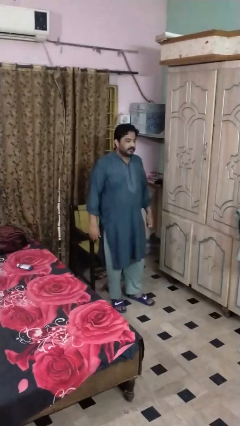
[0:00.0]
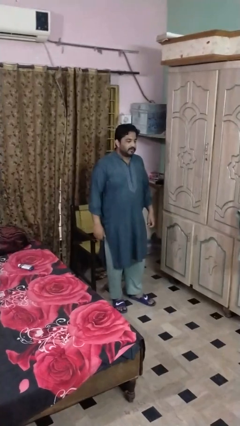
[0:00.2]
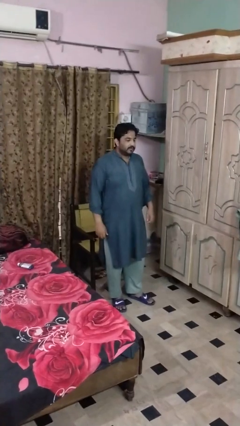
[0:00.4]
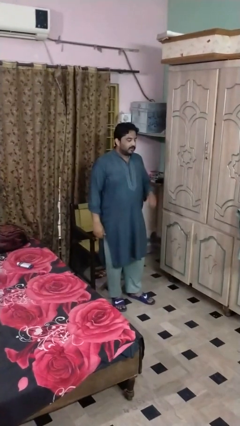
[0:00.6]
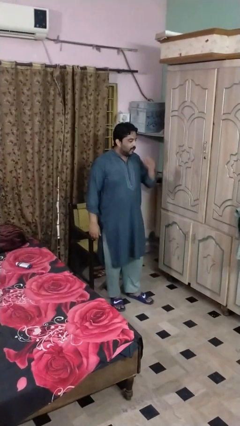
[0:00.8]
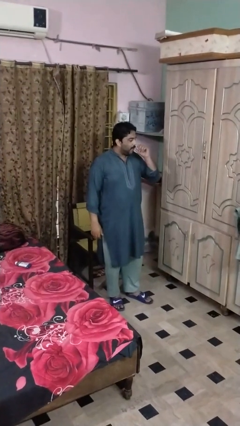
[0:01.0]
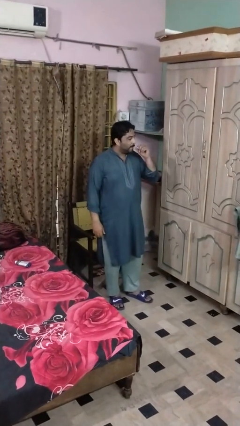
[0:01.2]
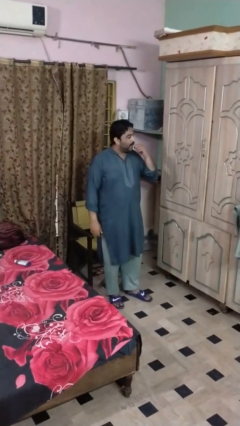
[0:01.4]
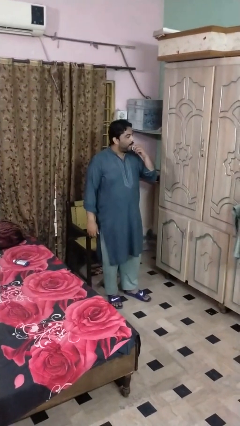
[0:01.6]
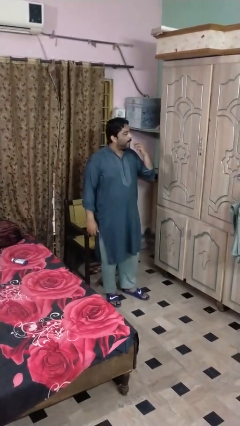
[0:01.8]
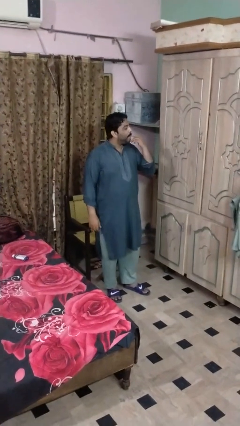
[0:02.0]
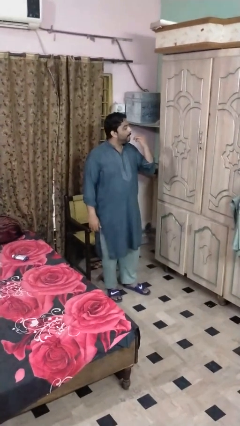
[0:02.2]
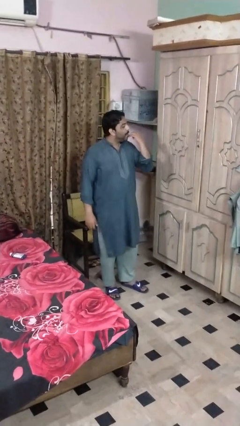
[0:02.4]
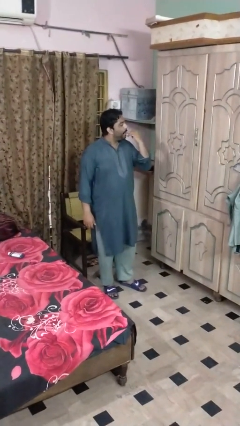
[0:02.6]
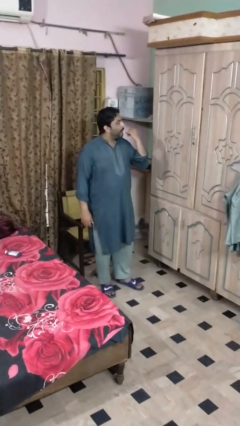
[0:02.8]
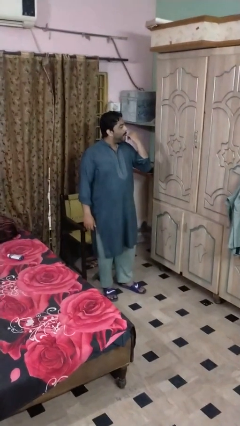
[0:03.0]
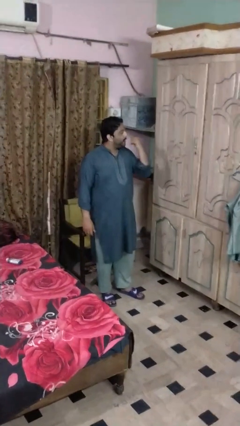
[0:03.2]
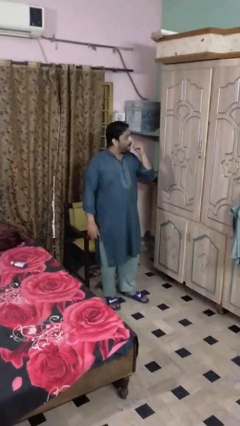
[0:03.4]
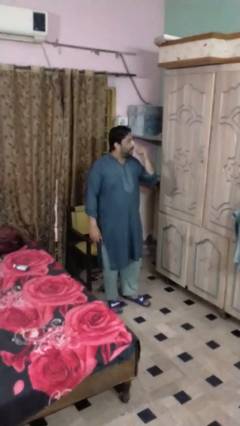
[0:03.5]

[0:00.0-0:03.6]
person licks fingers

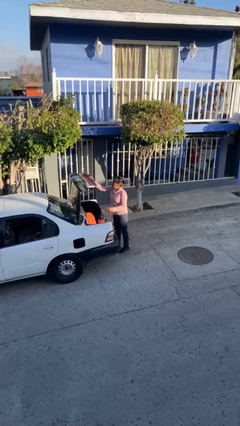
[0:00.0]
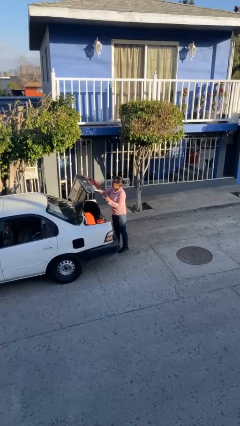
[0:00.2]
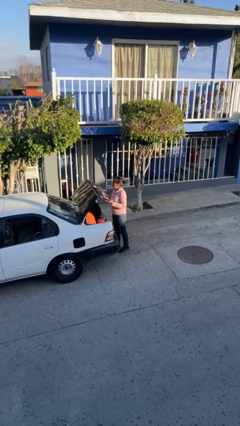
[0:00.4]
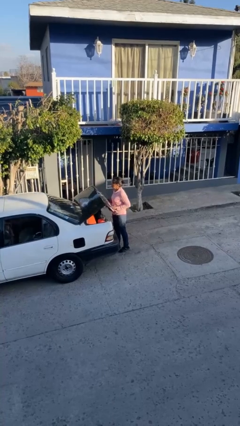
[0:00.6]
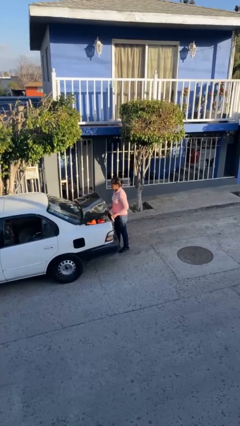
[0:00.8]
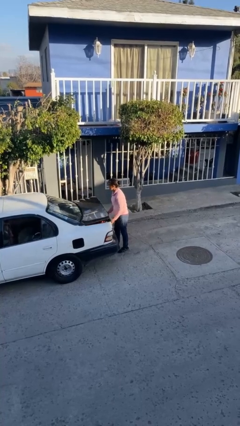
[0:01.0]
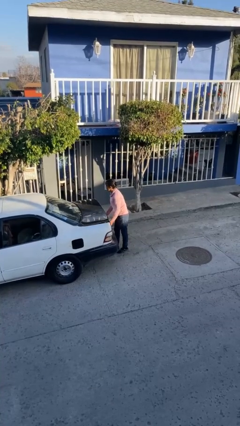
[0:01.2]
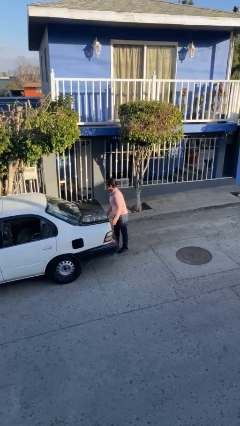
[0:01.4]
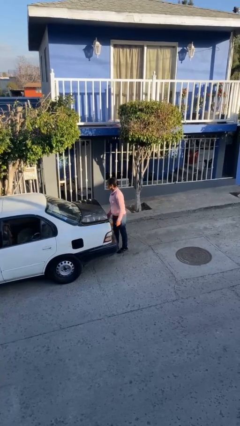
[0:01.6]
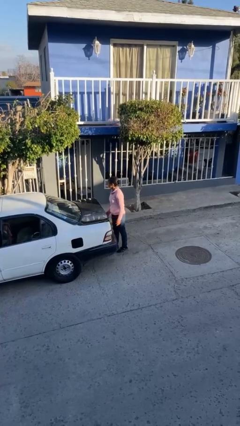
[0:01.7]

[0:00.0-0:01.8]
person closes car trunk

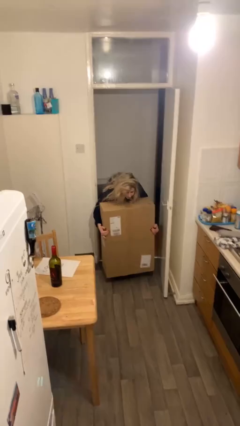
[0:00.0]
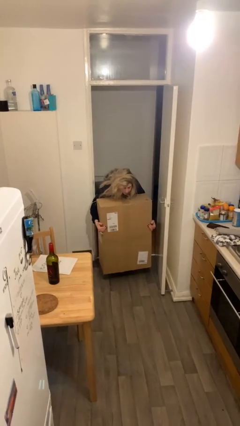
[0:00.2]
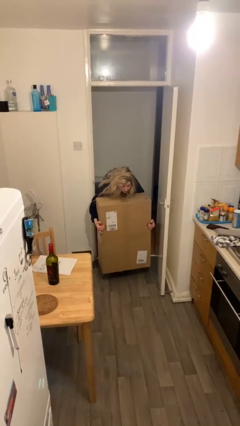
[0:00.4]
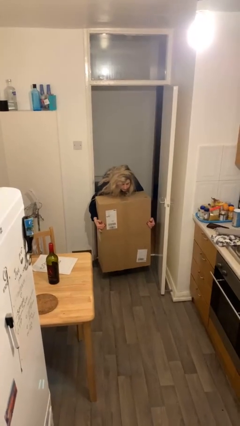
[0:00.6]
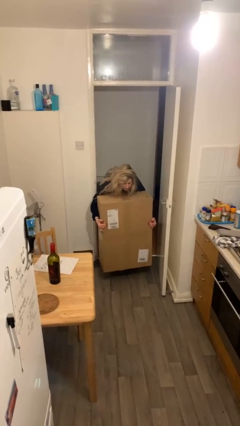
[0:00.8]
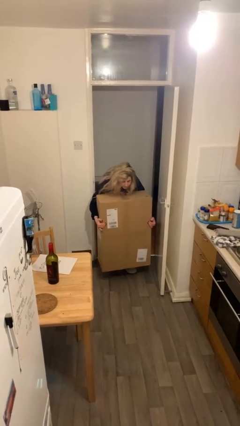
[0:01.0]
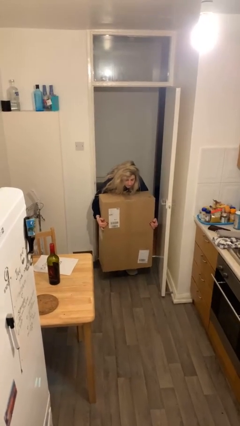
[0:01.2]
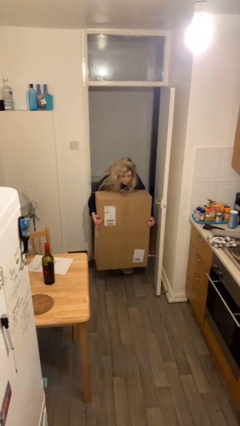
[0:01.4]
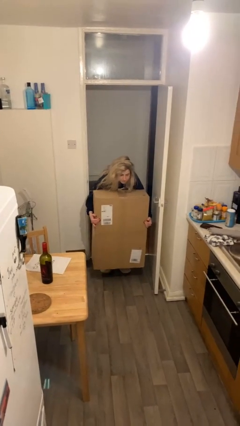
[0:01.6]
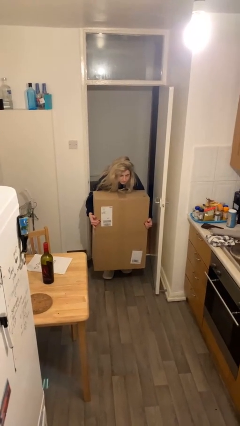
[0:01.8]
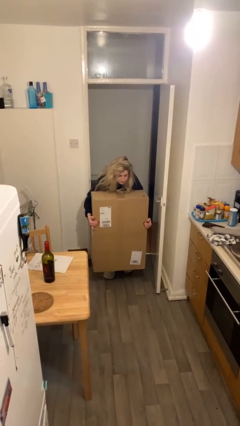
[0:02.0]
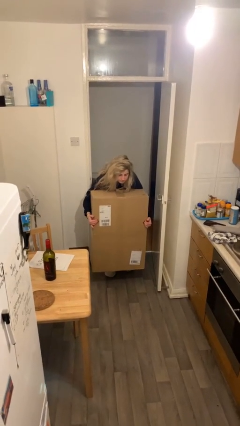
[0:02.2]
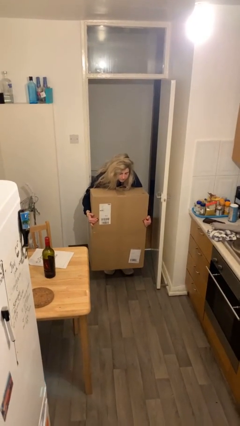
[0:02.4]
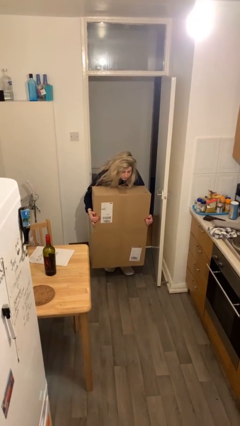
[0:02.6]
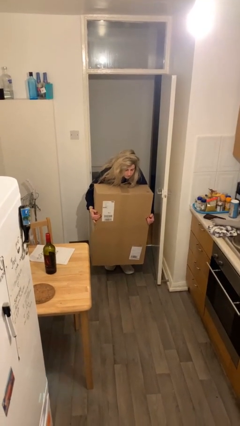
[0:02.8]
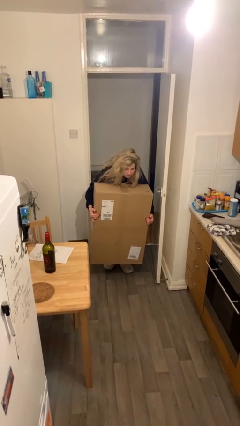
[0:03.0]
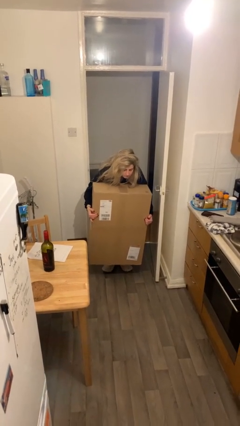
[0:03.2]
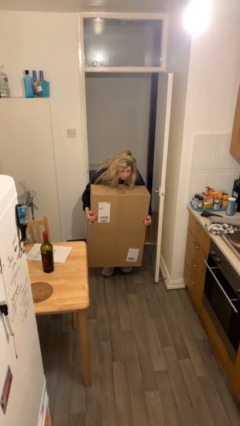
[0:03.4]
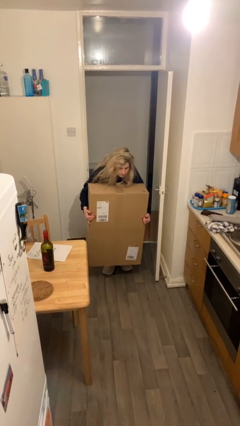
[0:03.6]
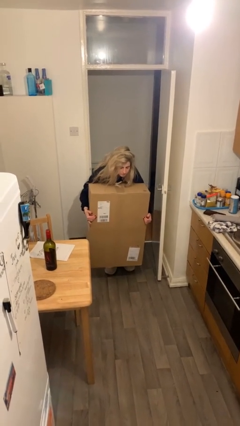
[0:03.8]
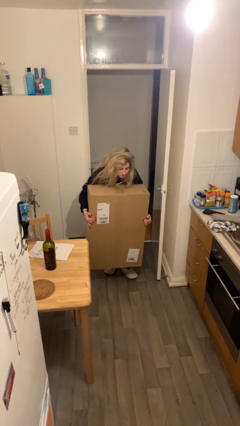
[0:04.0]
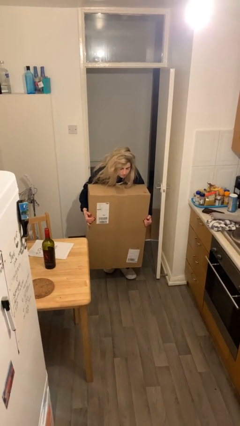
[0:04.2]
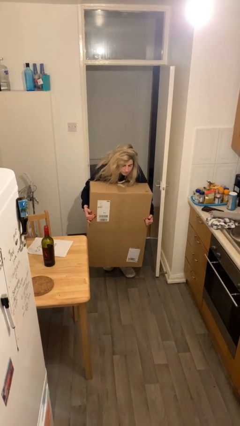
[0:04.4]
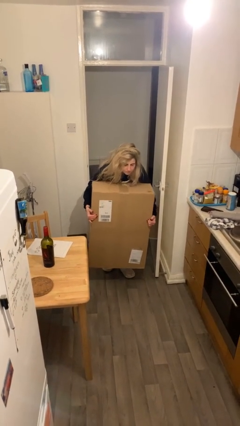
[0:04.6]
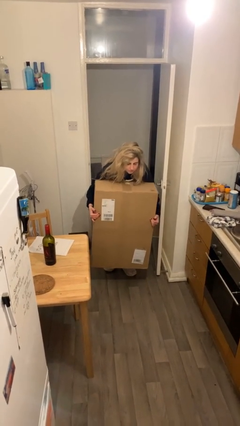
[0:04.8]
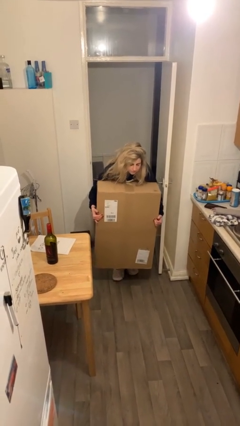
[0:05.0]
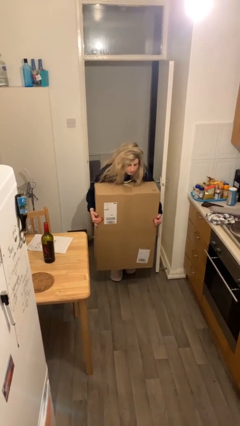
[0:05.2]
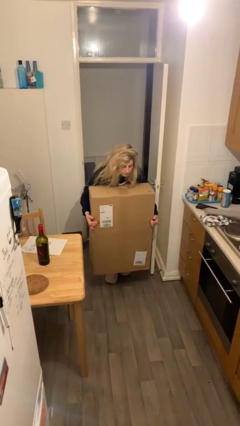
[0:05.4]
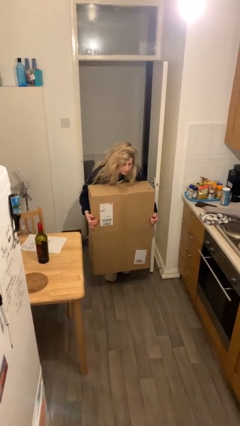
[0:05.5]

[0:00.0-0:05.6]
person carries heavy object

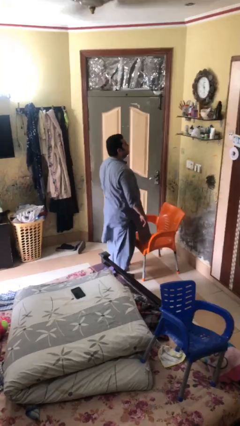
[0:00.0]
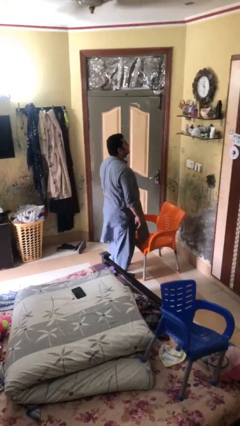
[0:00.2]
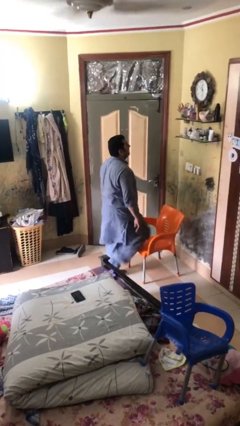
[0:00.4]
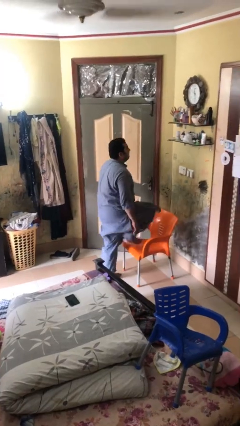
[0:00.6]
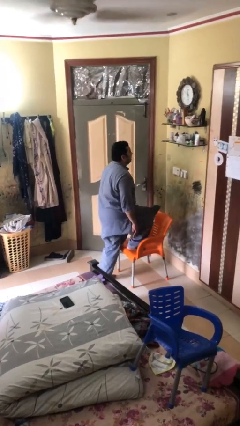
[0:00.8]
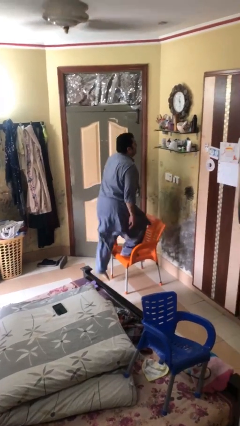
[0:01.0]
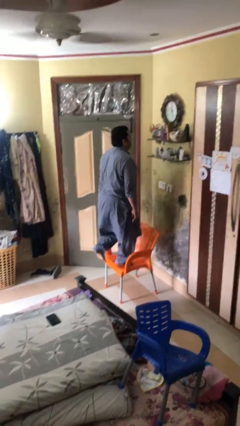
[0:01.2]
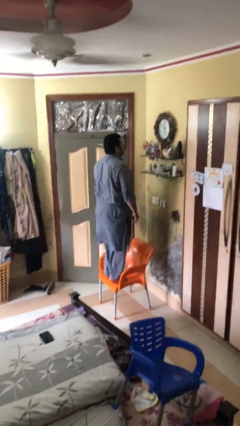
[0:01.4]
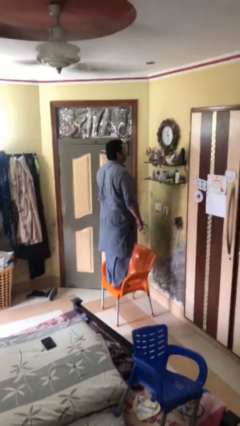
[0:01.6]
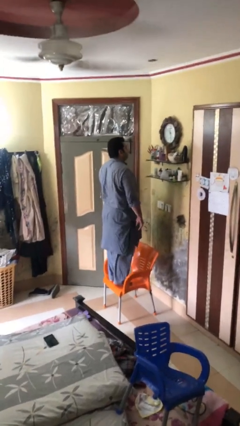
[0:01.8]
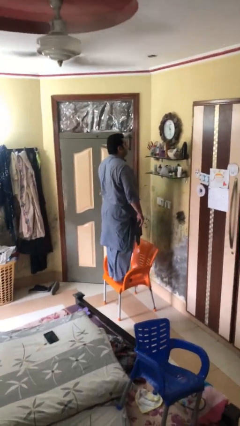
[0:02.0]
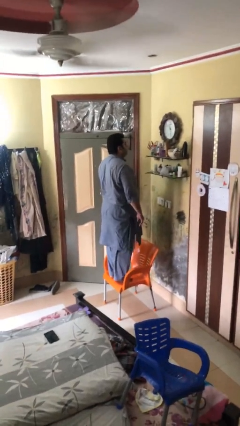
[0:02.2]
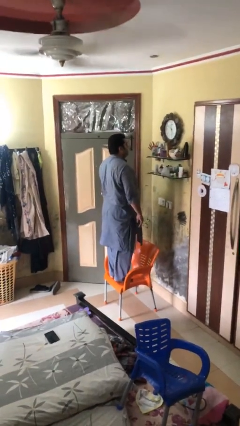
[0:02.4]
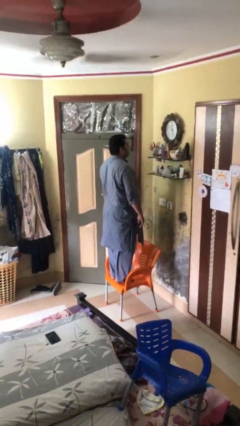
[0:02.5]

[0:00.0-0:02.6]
person climbs on chair

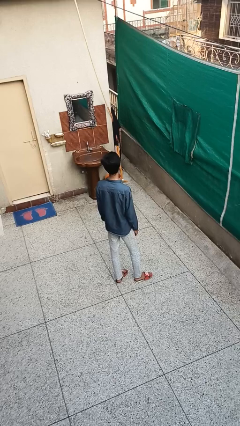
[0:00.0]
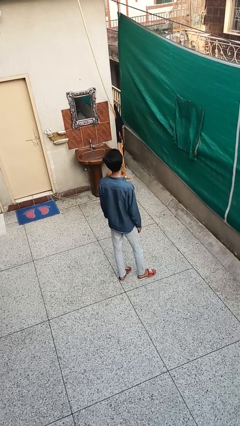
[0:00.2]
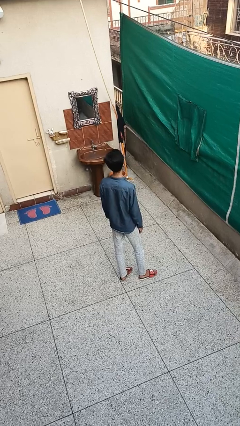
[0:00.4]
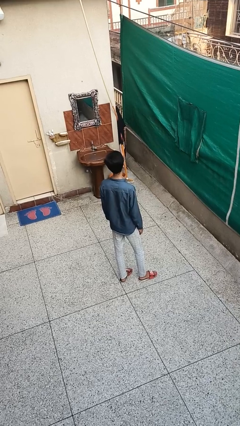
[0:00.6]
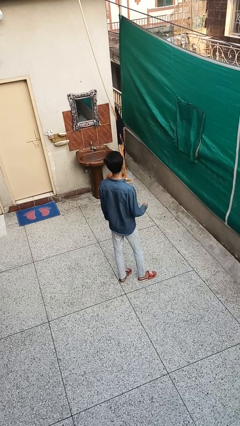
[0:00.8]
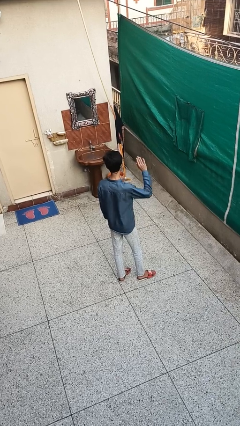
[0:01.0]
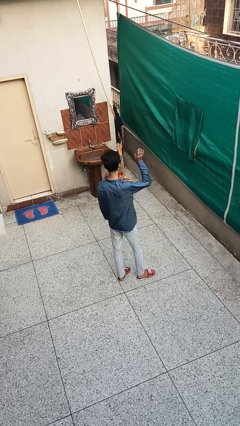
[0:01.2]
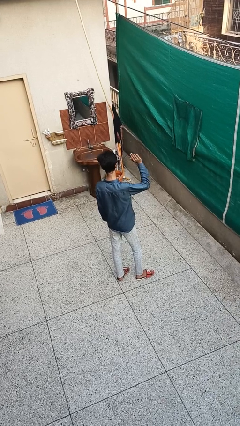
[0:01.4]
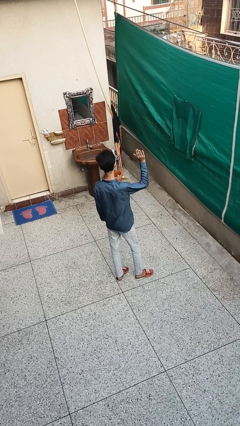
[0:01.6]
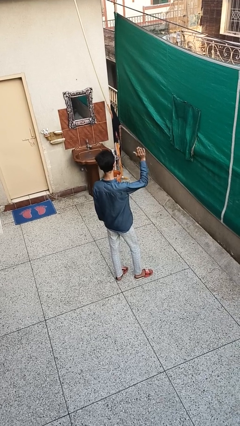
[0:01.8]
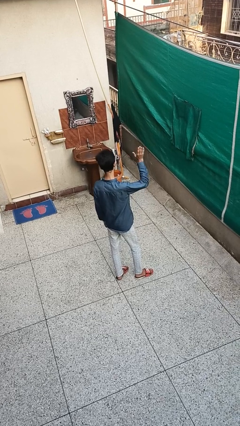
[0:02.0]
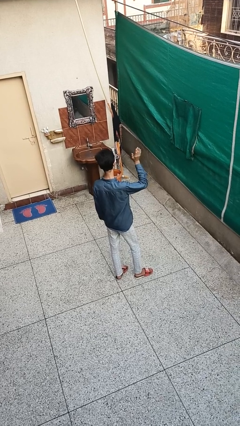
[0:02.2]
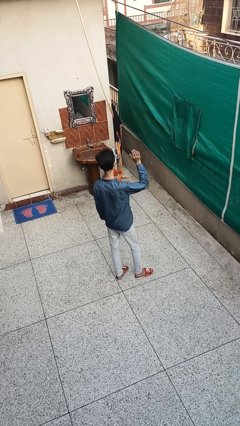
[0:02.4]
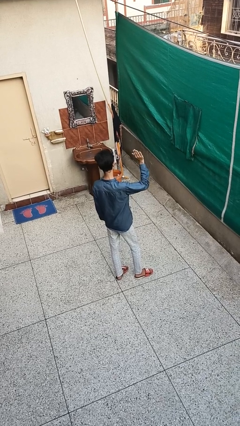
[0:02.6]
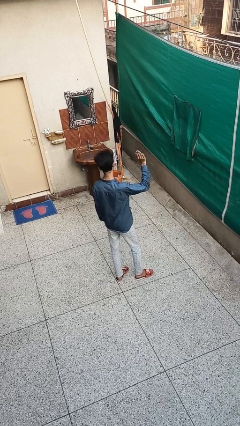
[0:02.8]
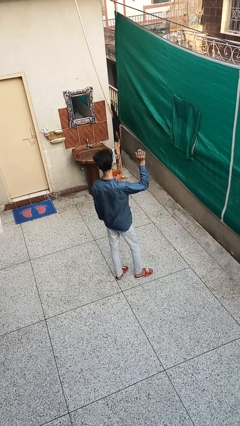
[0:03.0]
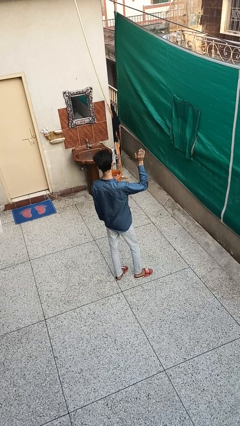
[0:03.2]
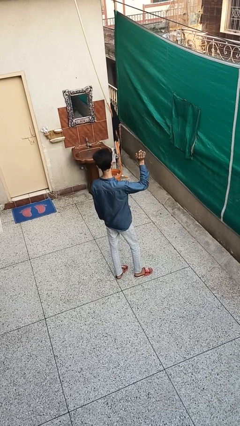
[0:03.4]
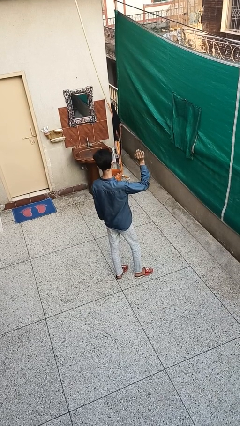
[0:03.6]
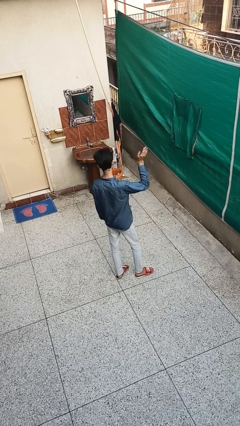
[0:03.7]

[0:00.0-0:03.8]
person waves at person

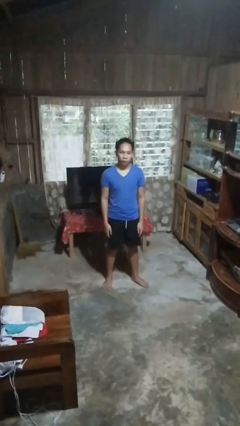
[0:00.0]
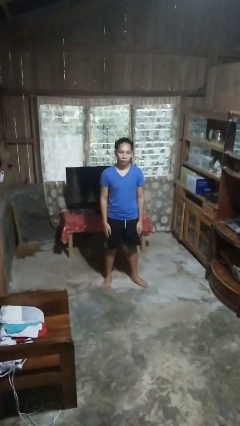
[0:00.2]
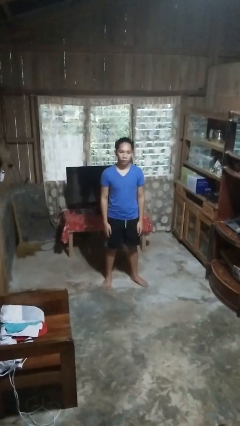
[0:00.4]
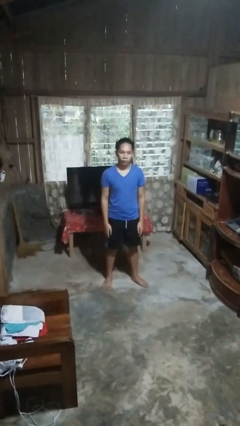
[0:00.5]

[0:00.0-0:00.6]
person gestures number five
